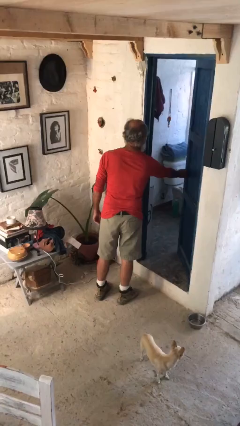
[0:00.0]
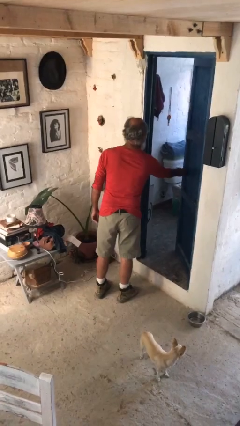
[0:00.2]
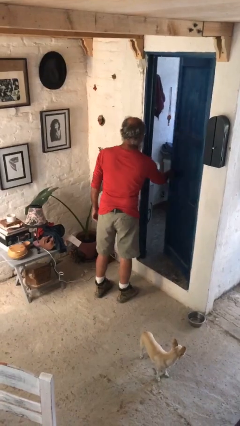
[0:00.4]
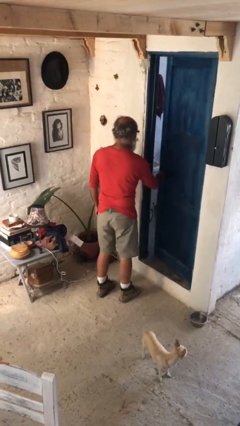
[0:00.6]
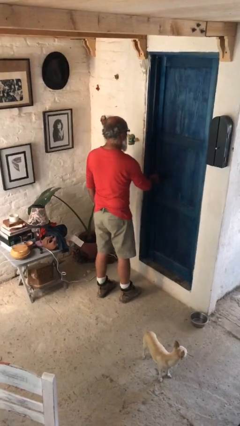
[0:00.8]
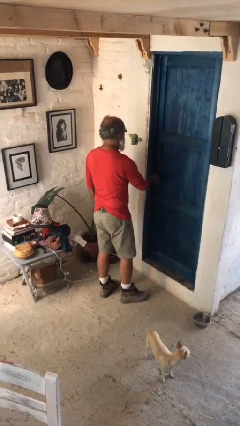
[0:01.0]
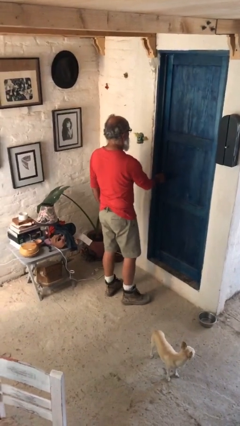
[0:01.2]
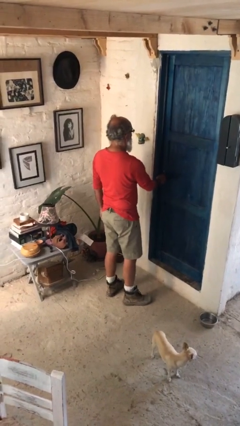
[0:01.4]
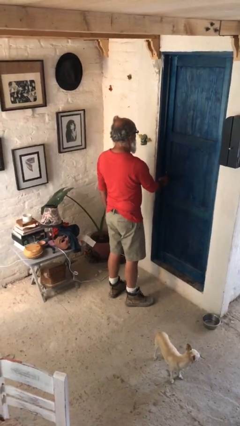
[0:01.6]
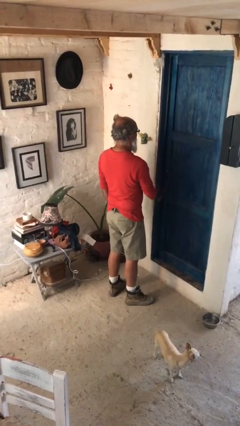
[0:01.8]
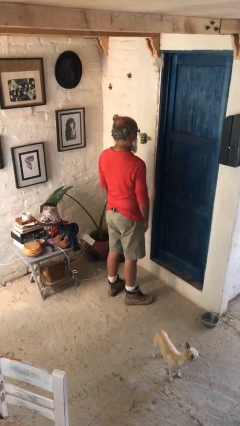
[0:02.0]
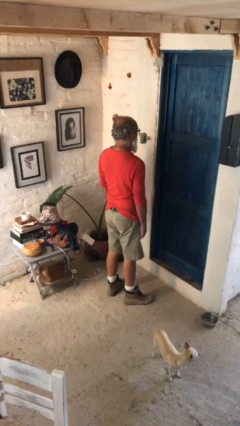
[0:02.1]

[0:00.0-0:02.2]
person closes facility door

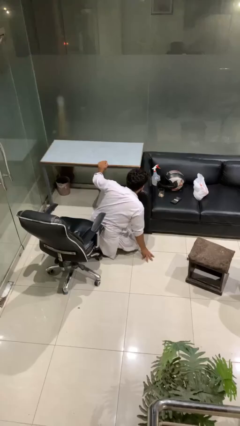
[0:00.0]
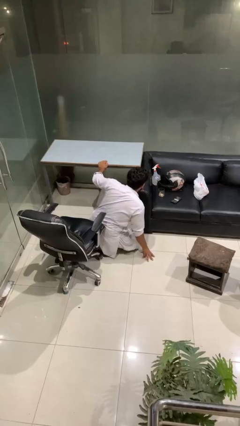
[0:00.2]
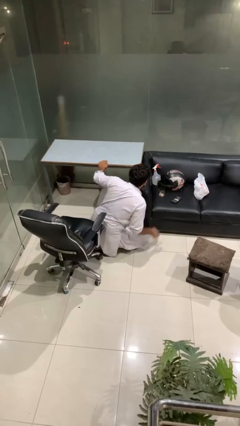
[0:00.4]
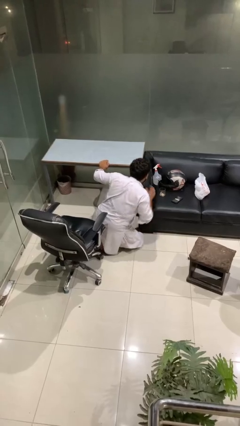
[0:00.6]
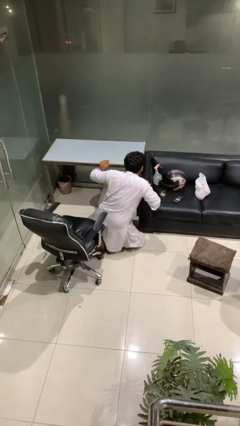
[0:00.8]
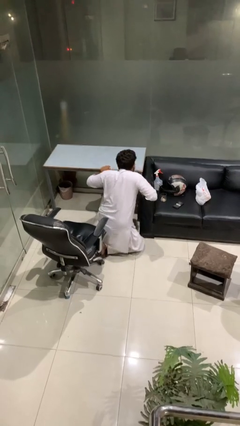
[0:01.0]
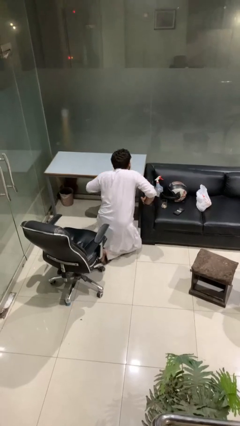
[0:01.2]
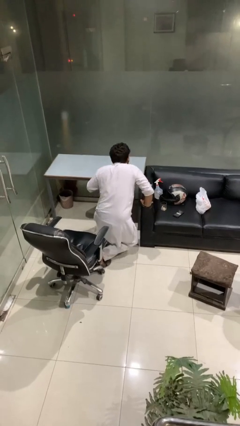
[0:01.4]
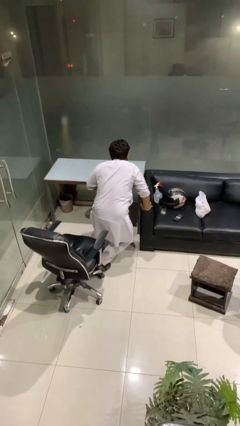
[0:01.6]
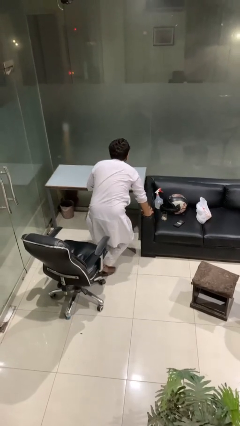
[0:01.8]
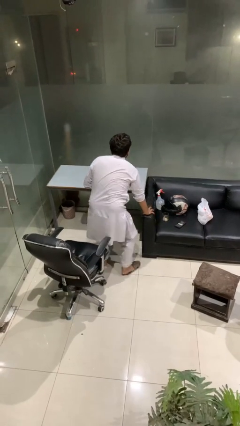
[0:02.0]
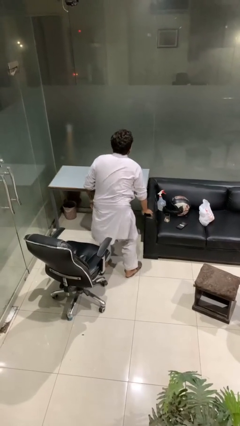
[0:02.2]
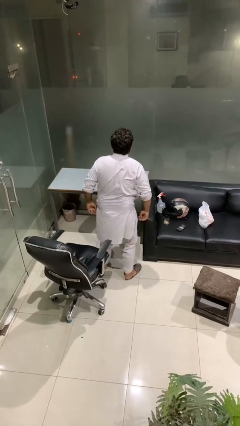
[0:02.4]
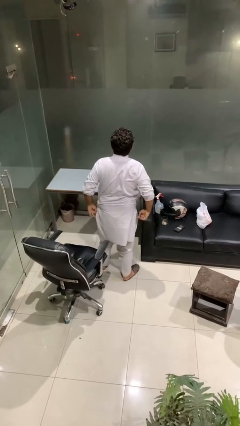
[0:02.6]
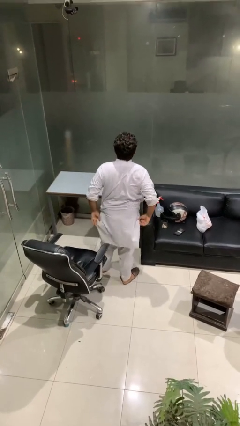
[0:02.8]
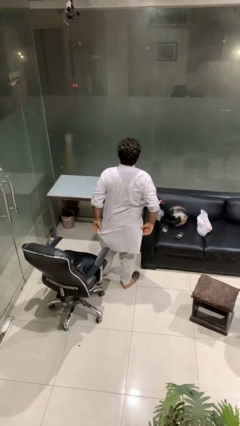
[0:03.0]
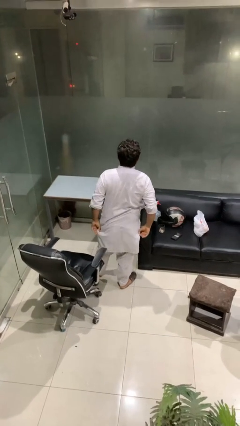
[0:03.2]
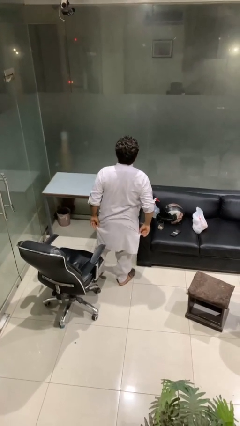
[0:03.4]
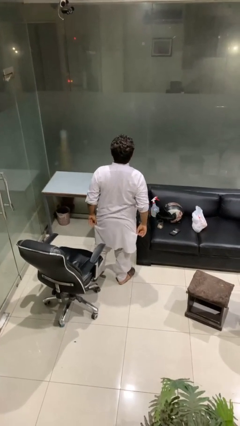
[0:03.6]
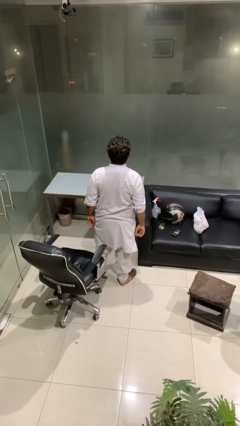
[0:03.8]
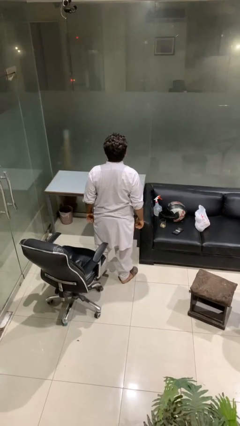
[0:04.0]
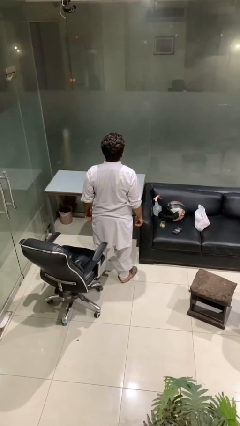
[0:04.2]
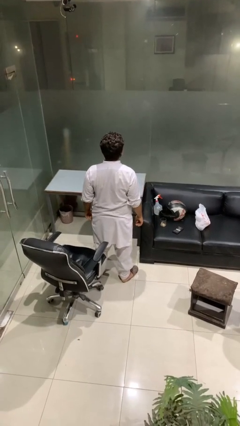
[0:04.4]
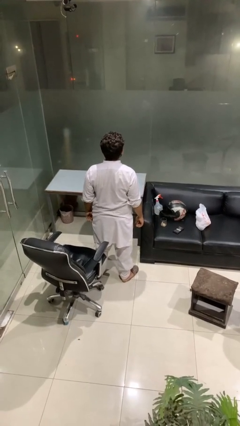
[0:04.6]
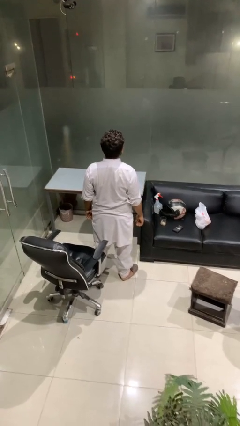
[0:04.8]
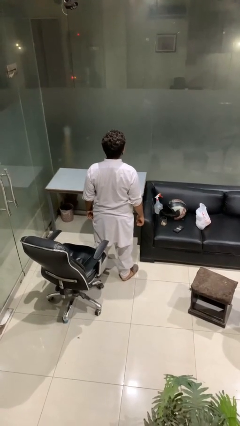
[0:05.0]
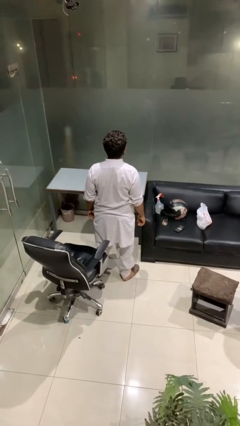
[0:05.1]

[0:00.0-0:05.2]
person stands up from floor

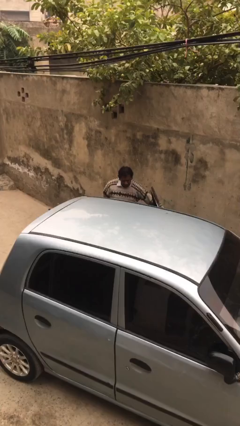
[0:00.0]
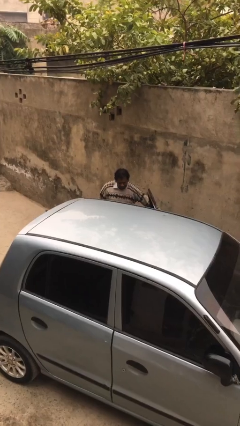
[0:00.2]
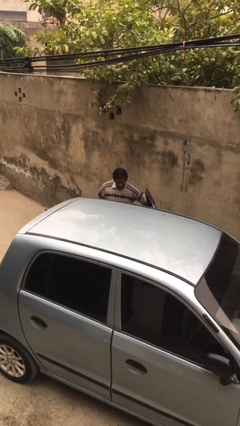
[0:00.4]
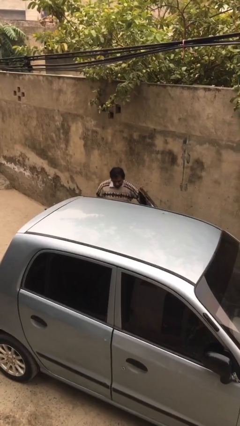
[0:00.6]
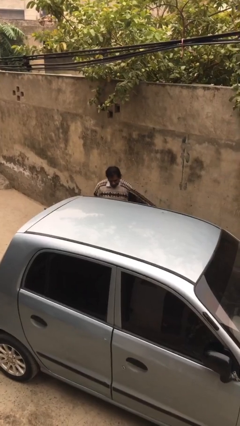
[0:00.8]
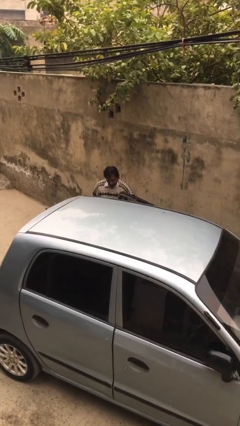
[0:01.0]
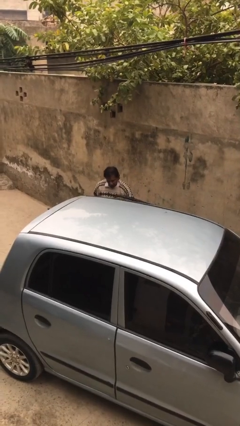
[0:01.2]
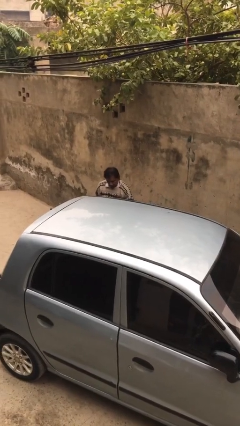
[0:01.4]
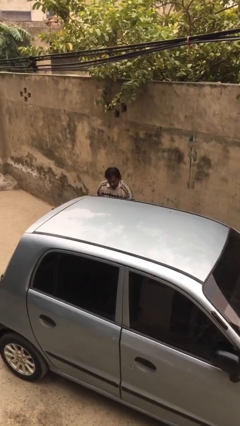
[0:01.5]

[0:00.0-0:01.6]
person closes car door

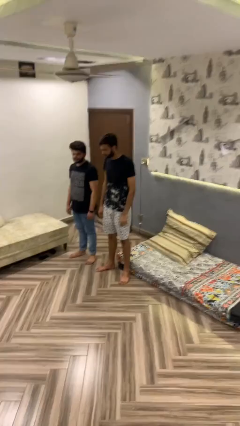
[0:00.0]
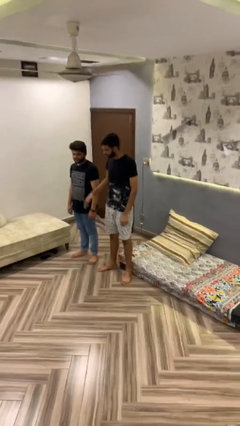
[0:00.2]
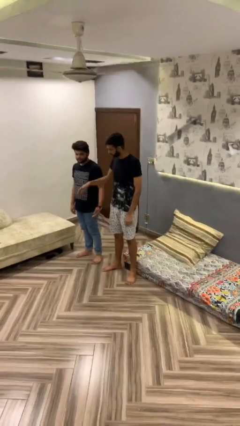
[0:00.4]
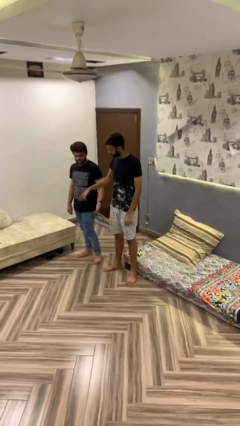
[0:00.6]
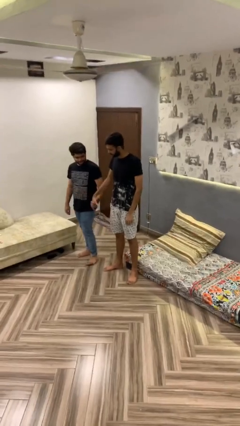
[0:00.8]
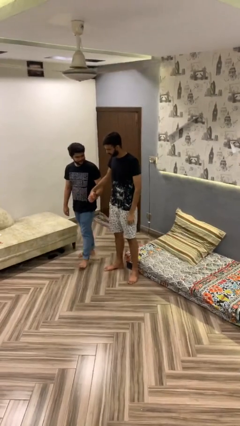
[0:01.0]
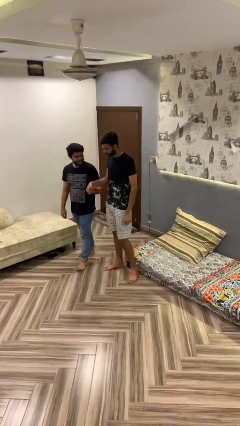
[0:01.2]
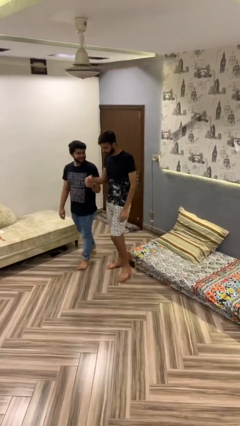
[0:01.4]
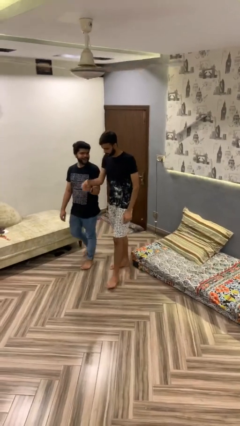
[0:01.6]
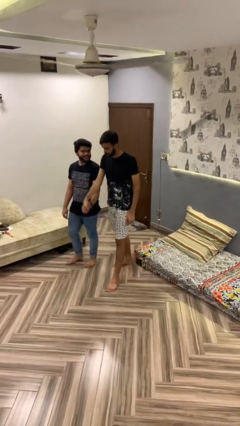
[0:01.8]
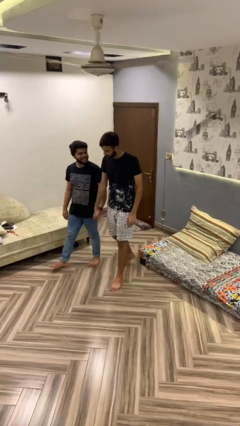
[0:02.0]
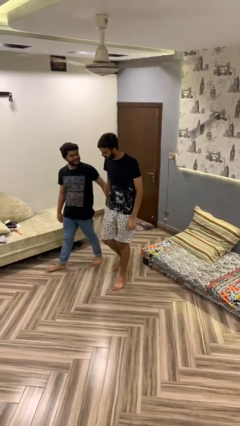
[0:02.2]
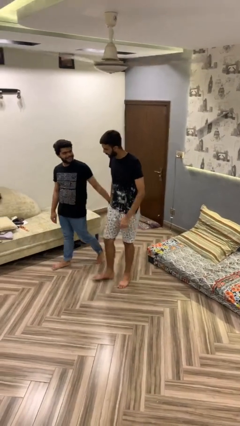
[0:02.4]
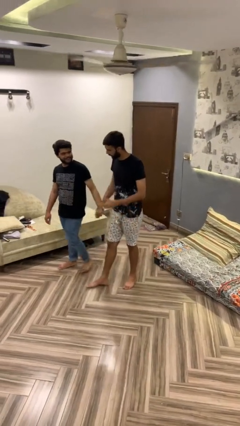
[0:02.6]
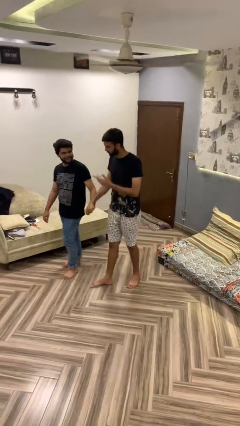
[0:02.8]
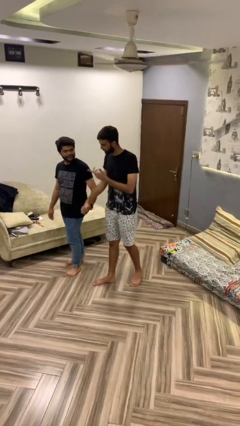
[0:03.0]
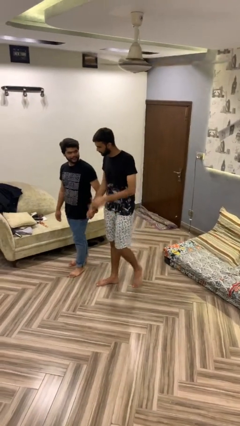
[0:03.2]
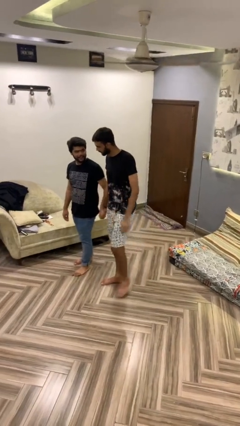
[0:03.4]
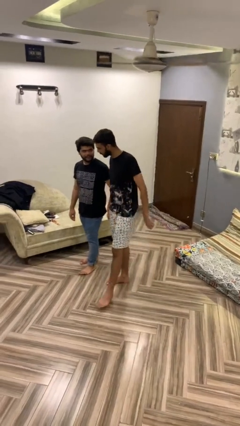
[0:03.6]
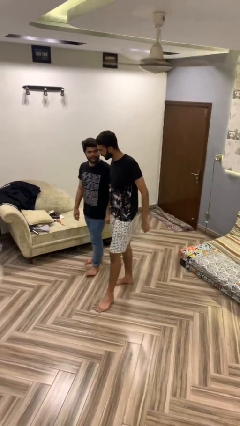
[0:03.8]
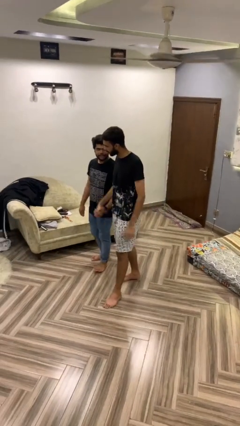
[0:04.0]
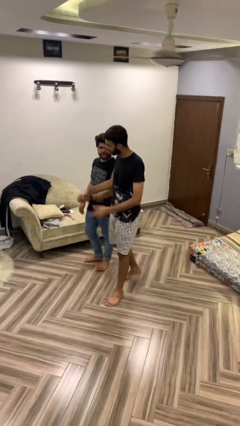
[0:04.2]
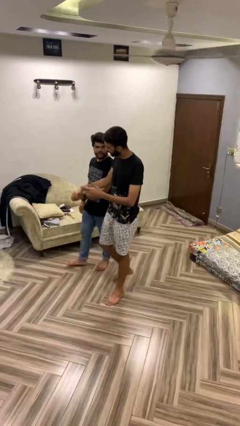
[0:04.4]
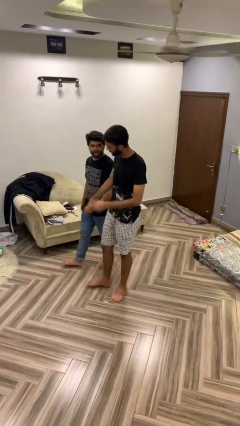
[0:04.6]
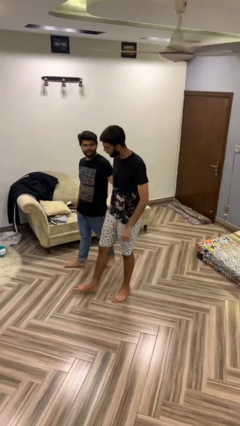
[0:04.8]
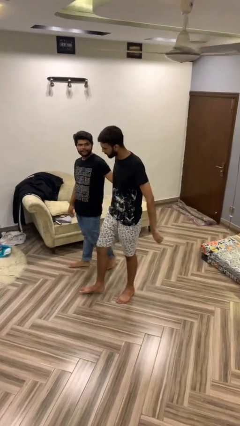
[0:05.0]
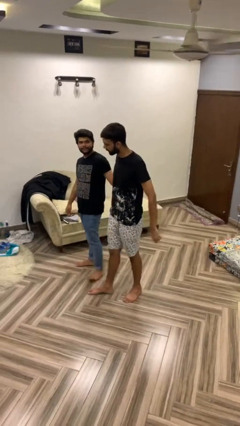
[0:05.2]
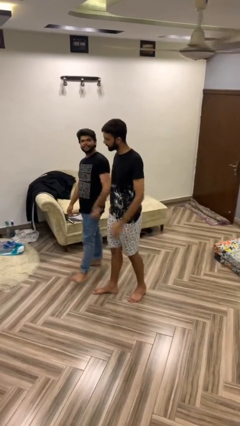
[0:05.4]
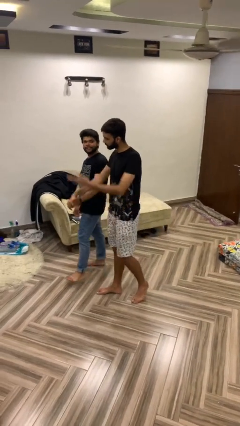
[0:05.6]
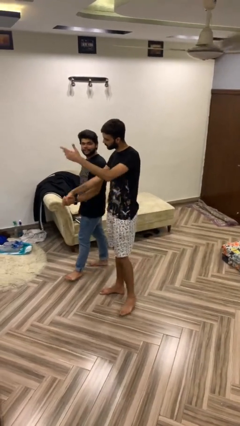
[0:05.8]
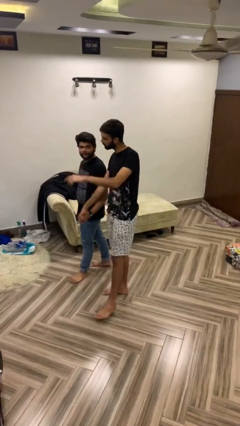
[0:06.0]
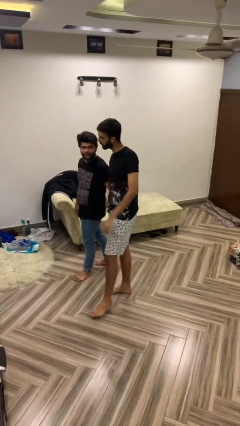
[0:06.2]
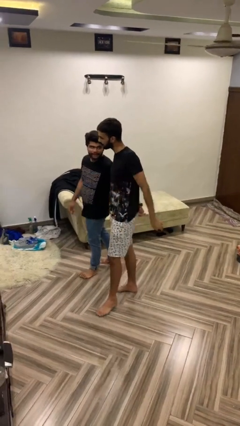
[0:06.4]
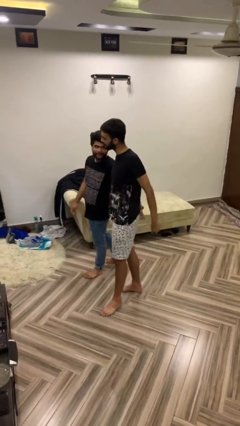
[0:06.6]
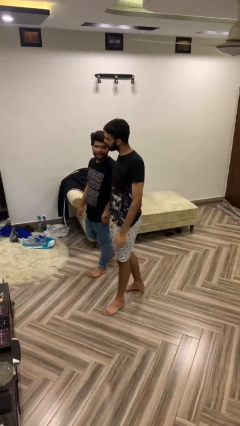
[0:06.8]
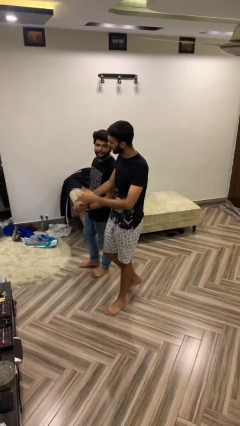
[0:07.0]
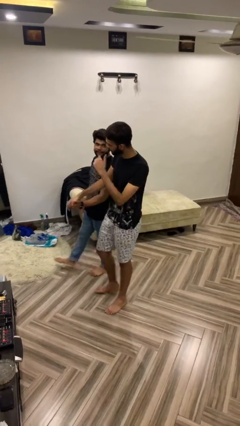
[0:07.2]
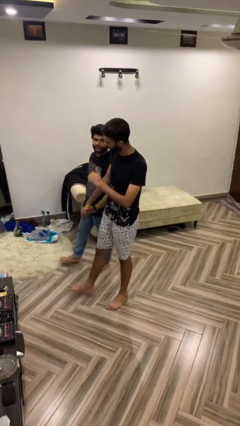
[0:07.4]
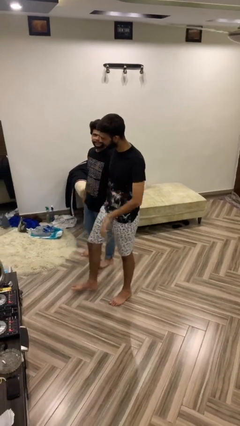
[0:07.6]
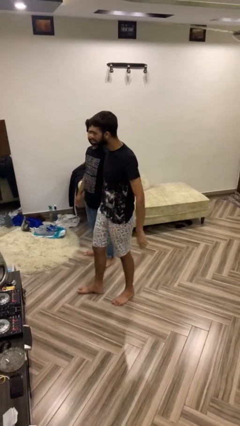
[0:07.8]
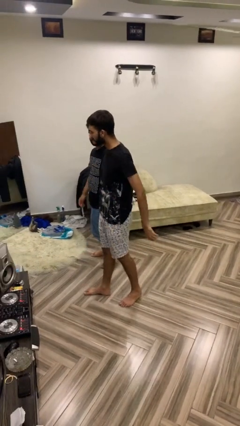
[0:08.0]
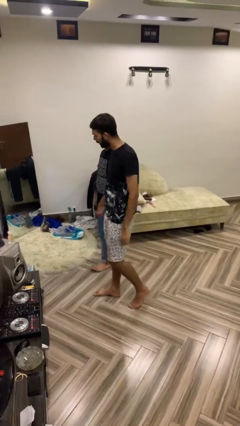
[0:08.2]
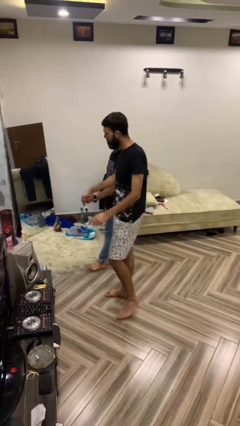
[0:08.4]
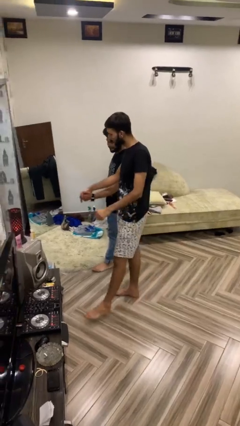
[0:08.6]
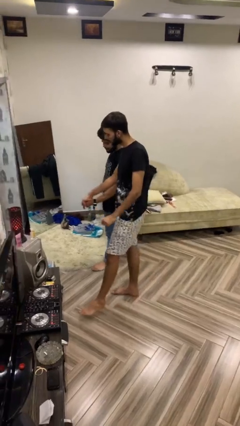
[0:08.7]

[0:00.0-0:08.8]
person holds hand
